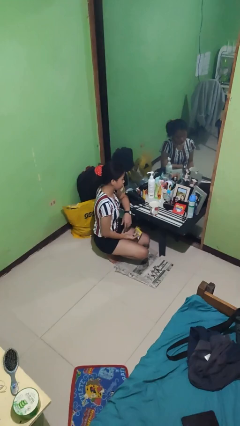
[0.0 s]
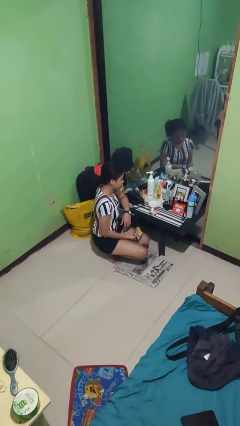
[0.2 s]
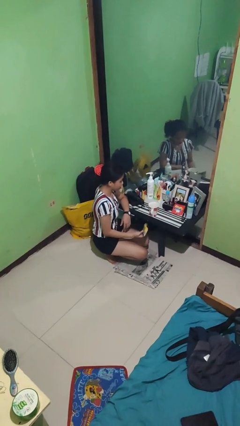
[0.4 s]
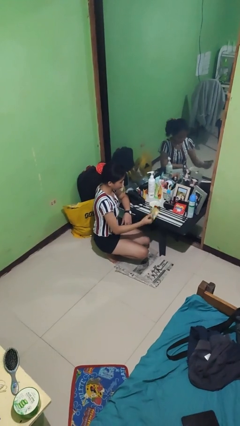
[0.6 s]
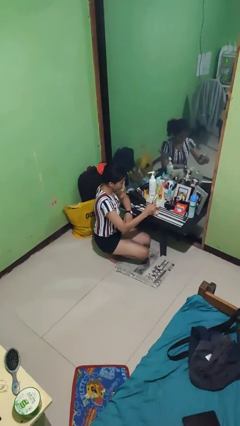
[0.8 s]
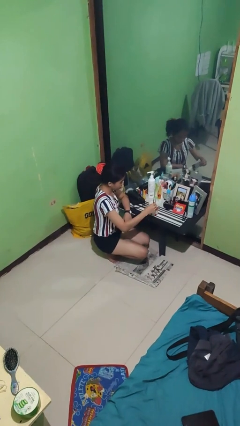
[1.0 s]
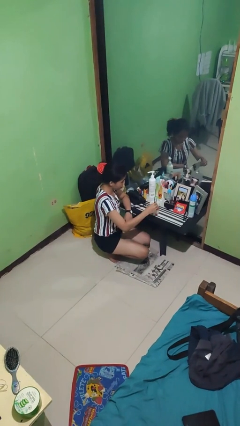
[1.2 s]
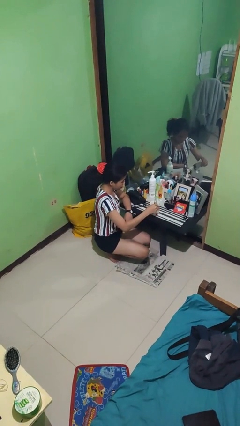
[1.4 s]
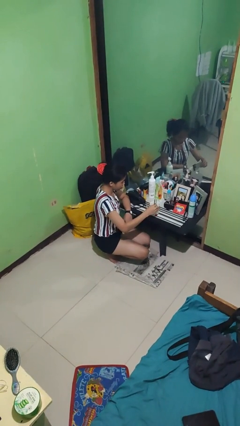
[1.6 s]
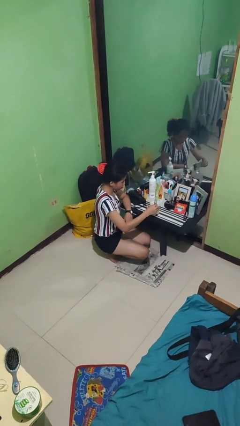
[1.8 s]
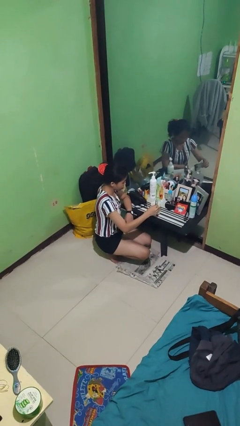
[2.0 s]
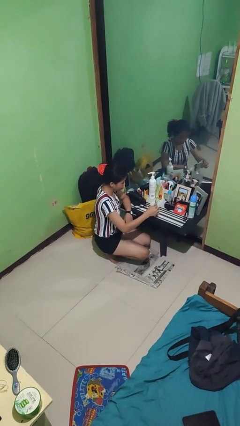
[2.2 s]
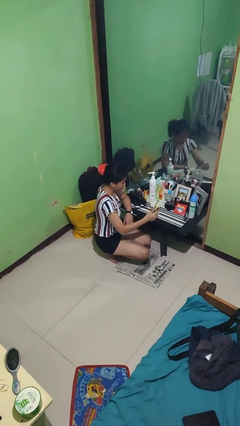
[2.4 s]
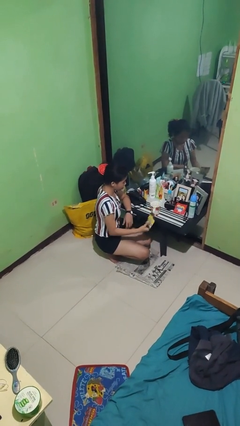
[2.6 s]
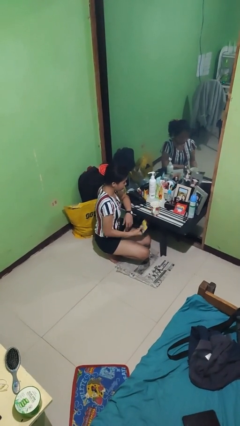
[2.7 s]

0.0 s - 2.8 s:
person pours coffee into mug

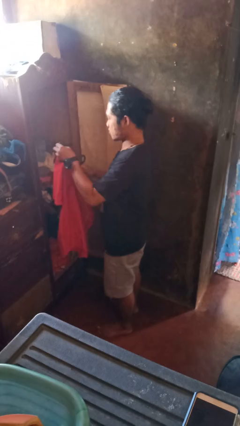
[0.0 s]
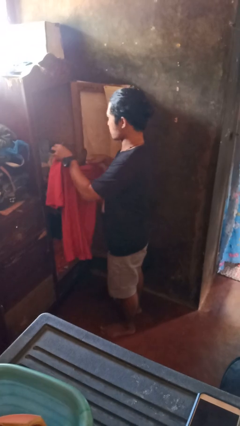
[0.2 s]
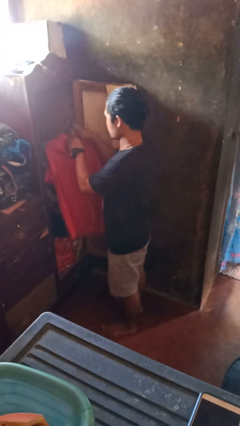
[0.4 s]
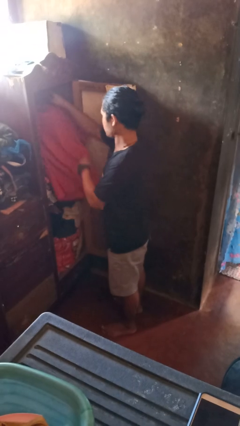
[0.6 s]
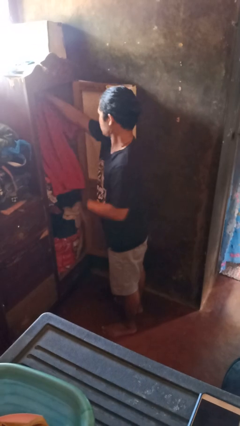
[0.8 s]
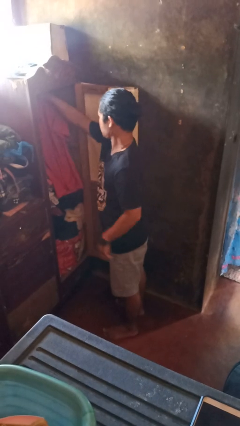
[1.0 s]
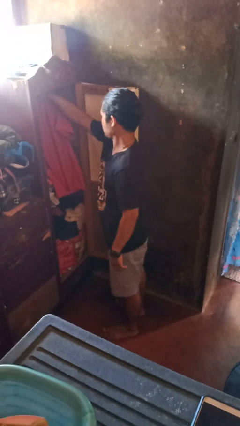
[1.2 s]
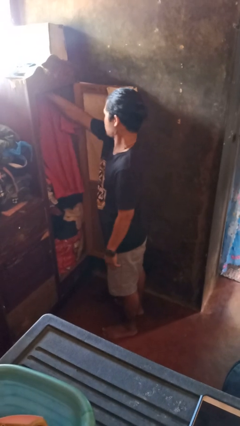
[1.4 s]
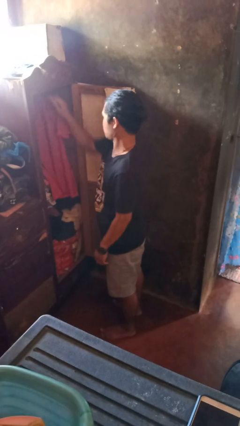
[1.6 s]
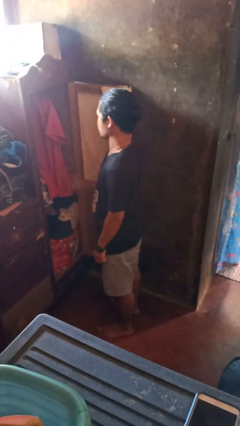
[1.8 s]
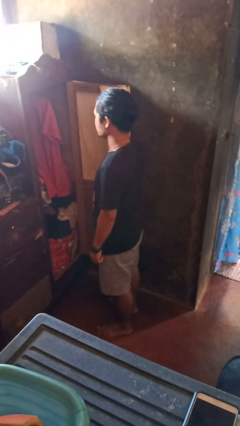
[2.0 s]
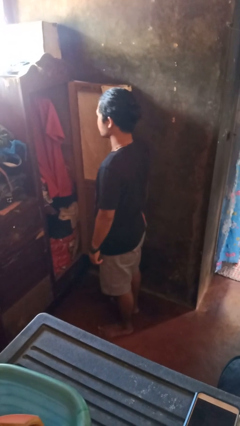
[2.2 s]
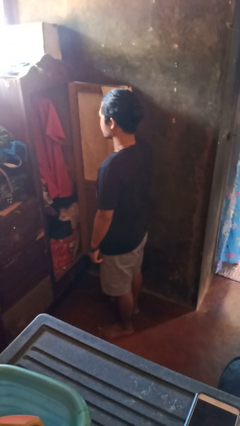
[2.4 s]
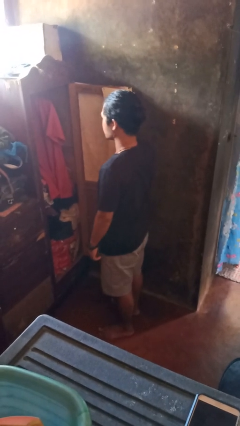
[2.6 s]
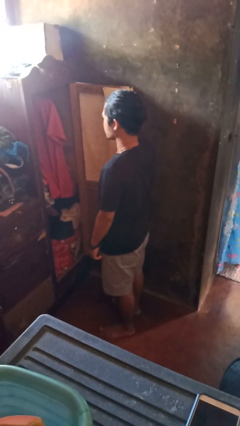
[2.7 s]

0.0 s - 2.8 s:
person puts clothes into closet

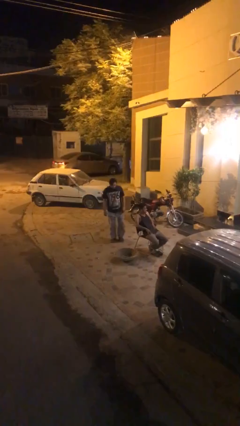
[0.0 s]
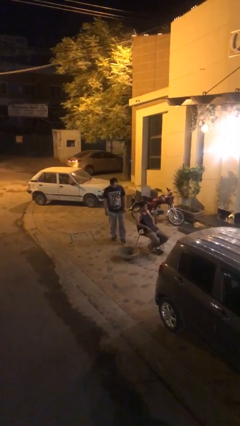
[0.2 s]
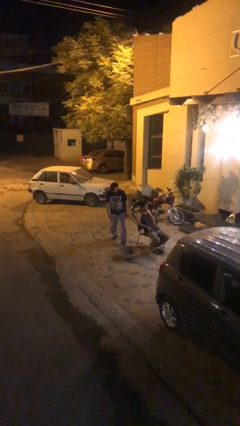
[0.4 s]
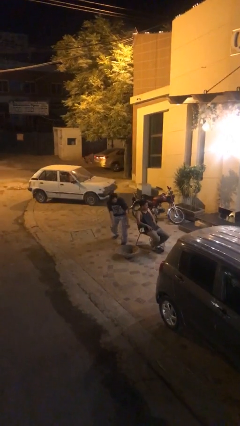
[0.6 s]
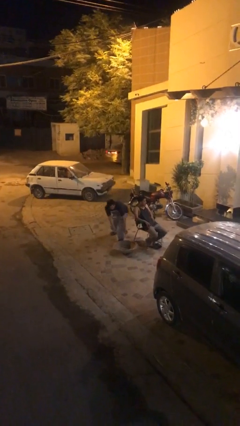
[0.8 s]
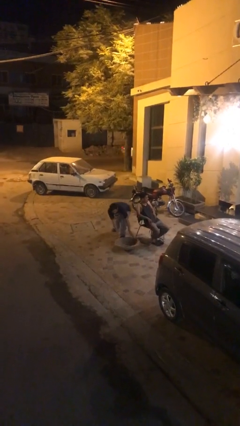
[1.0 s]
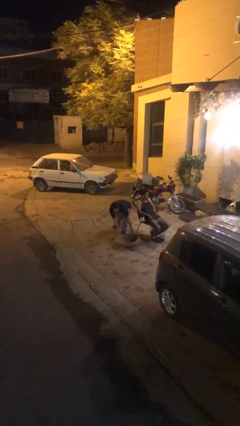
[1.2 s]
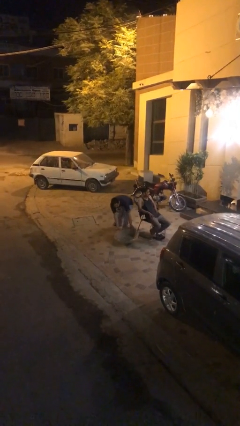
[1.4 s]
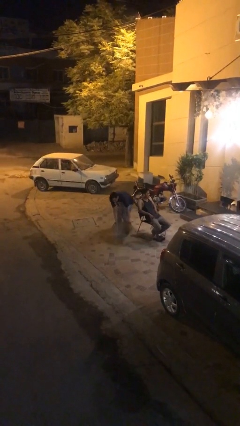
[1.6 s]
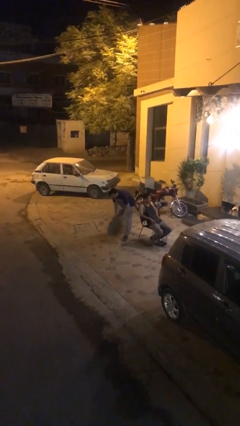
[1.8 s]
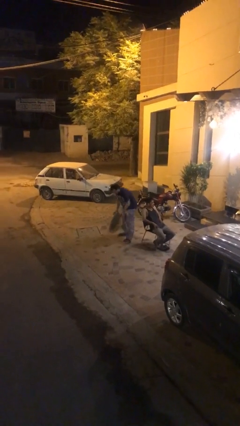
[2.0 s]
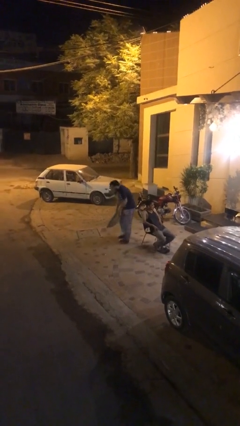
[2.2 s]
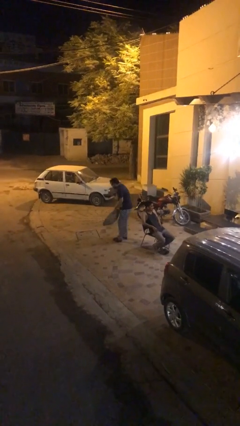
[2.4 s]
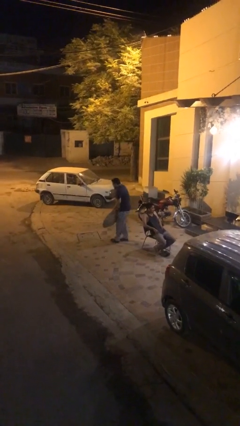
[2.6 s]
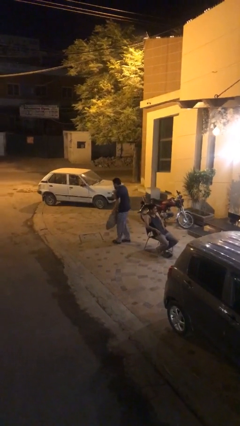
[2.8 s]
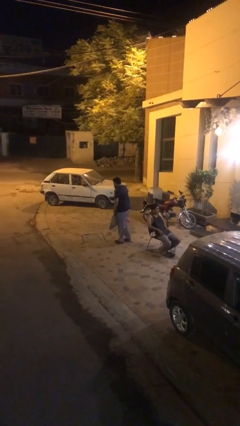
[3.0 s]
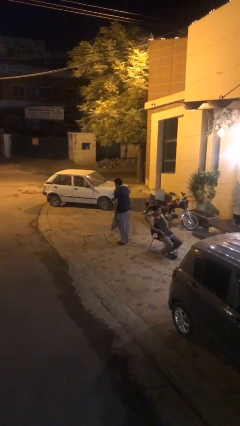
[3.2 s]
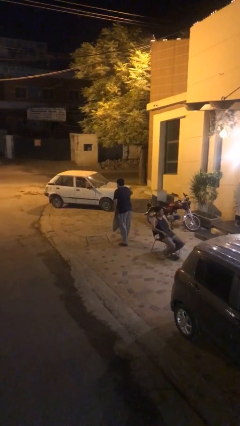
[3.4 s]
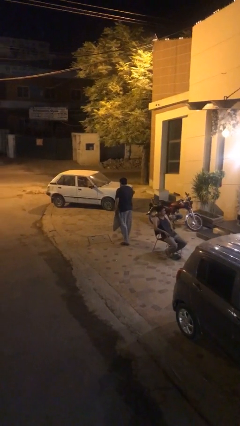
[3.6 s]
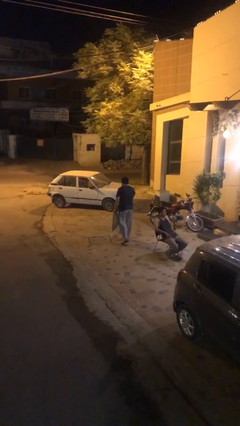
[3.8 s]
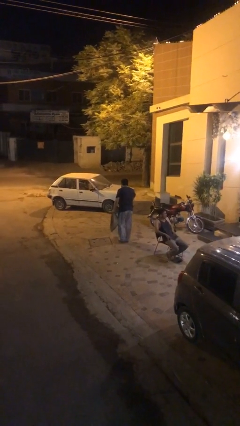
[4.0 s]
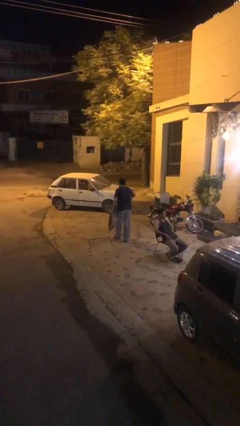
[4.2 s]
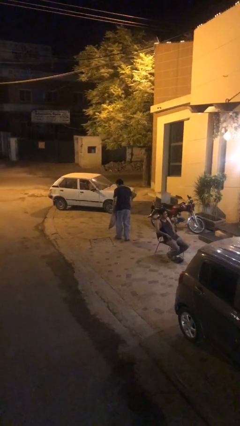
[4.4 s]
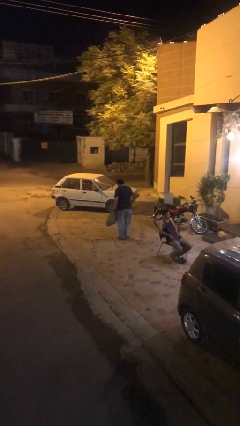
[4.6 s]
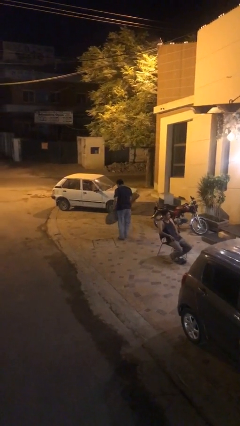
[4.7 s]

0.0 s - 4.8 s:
person steals object from person

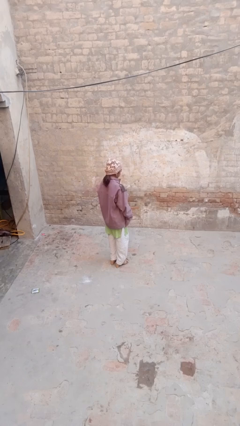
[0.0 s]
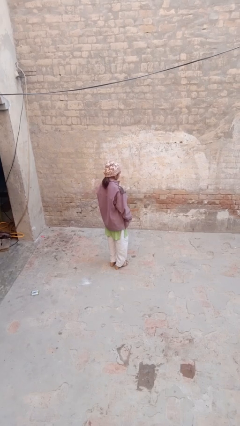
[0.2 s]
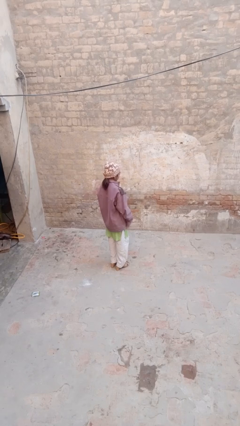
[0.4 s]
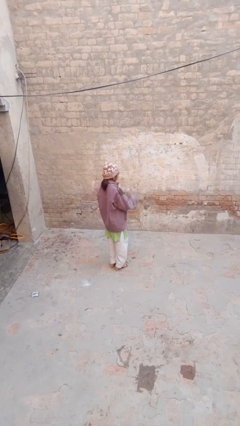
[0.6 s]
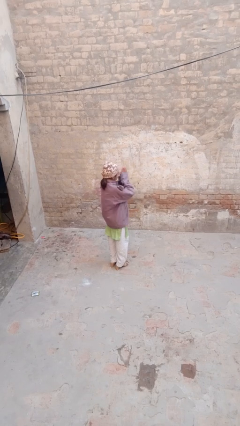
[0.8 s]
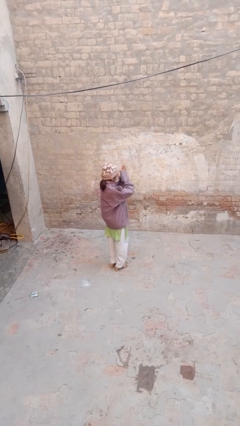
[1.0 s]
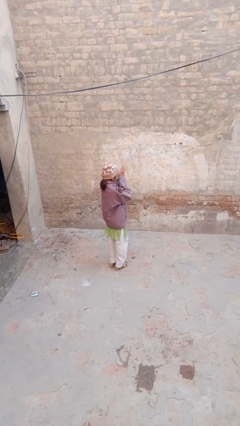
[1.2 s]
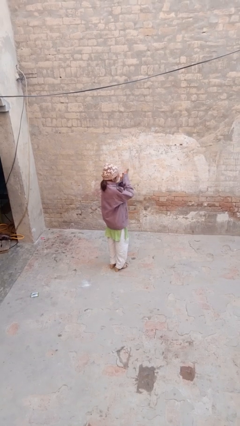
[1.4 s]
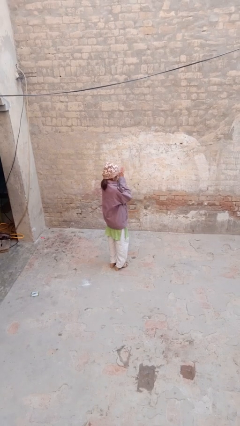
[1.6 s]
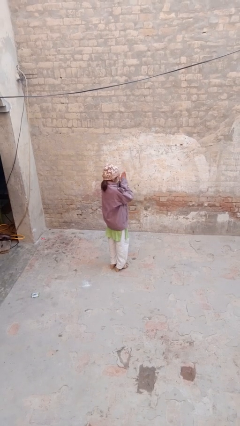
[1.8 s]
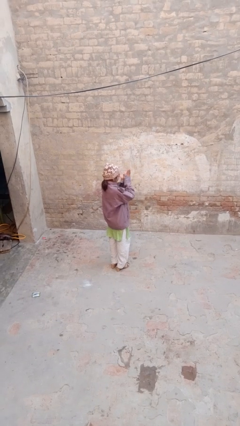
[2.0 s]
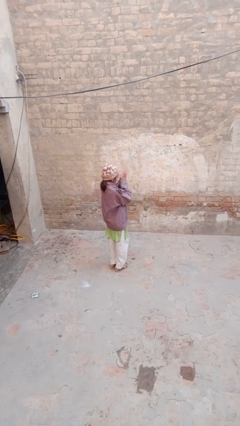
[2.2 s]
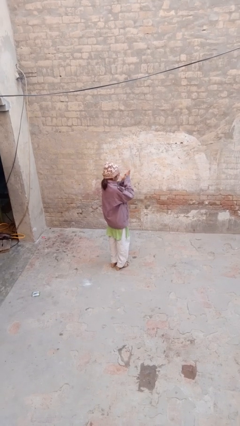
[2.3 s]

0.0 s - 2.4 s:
person blows into hands

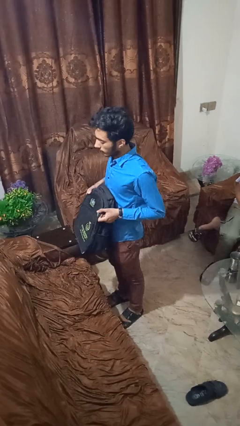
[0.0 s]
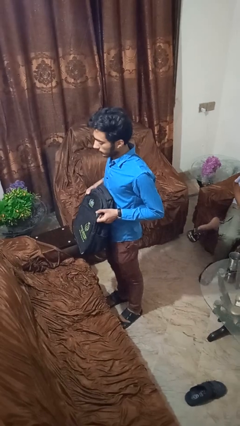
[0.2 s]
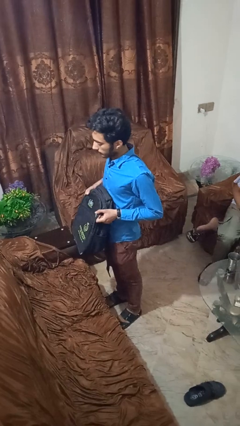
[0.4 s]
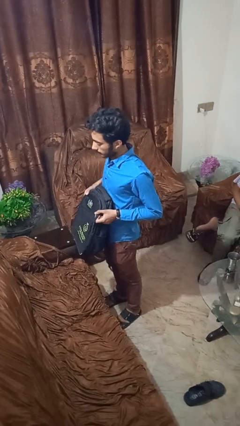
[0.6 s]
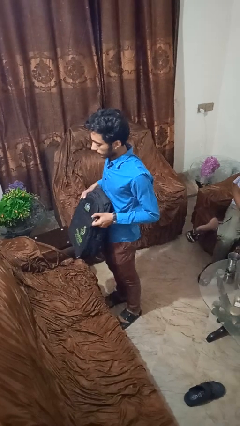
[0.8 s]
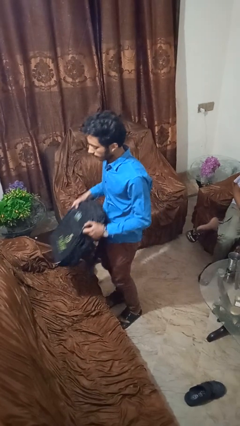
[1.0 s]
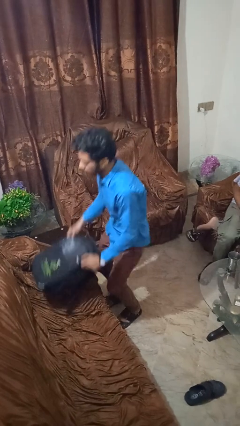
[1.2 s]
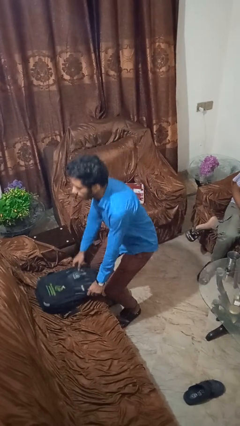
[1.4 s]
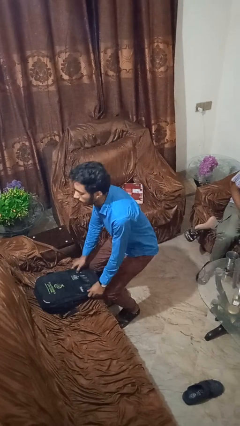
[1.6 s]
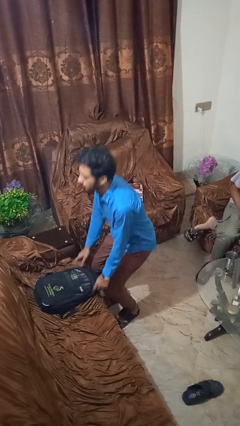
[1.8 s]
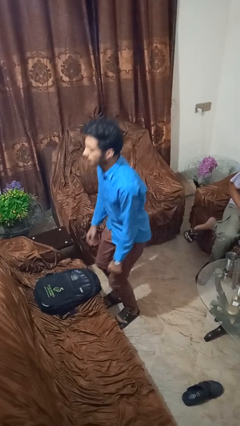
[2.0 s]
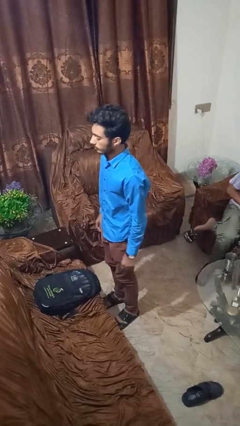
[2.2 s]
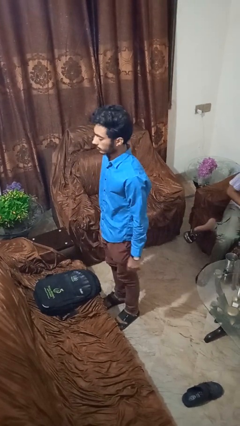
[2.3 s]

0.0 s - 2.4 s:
person puts down object on couch

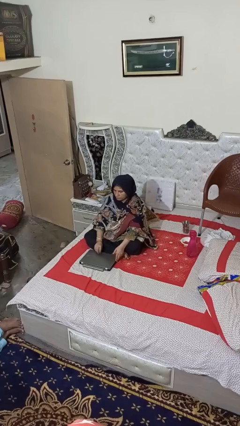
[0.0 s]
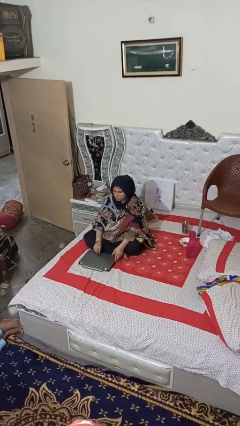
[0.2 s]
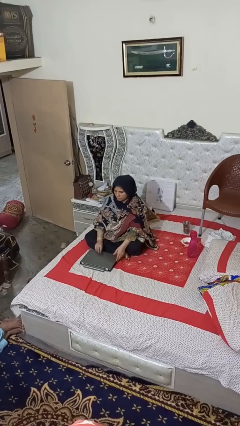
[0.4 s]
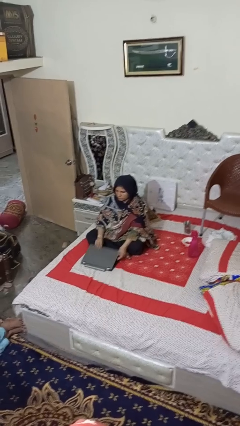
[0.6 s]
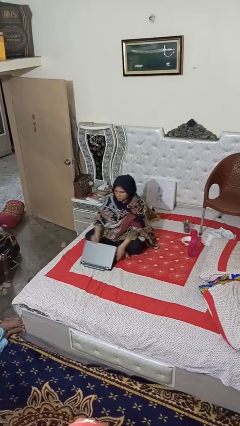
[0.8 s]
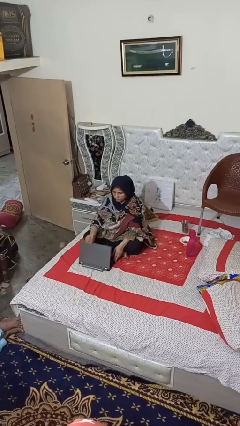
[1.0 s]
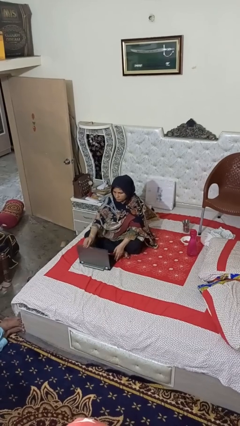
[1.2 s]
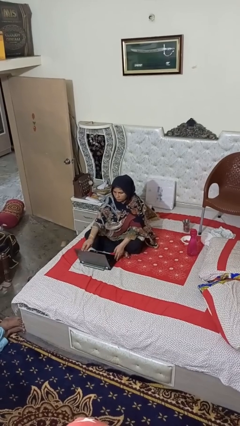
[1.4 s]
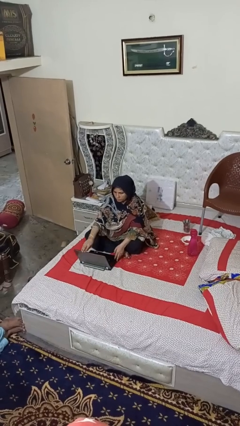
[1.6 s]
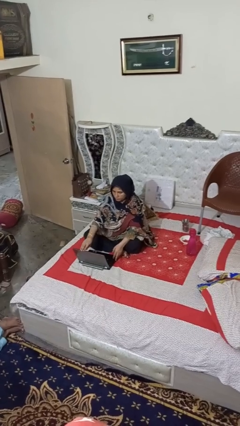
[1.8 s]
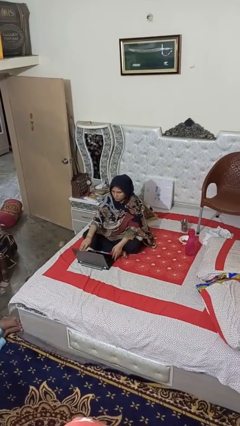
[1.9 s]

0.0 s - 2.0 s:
person opens laptop

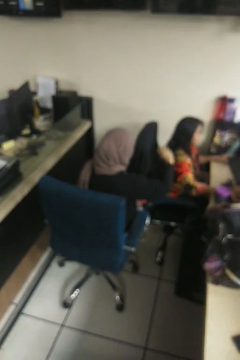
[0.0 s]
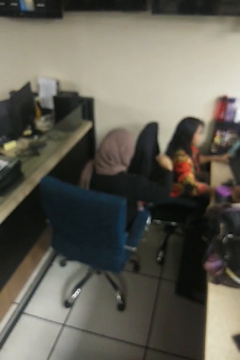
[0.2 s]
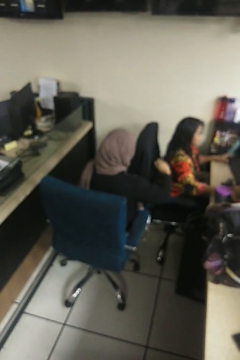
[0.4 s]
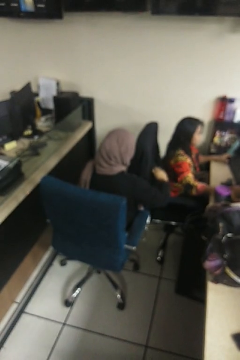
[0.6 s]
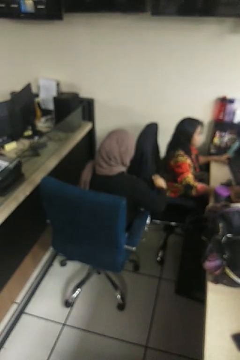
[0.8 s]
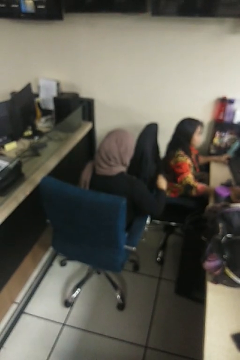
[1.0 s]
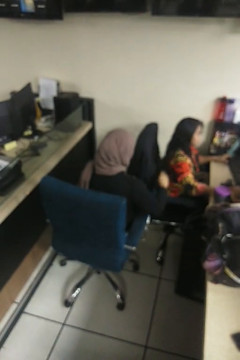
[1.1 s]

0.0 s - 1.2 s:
person brushes hair of person
